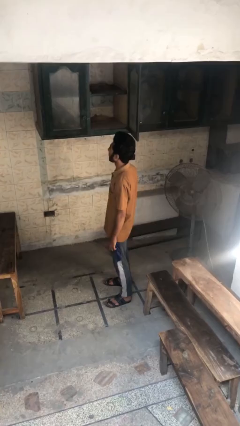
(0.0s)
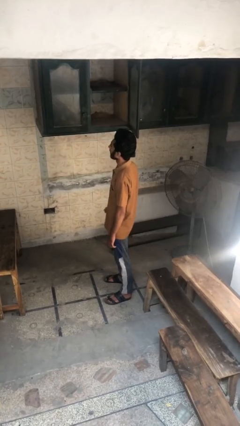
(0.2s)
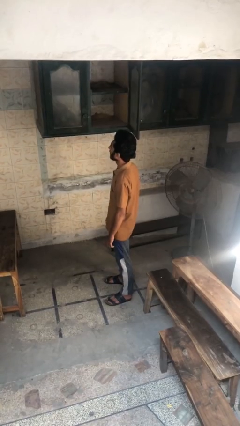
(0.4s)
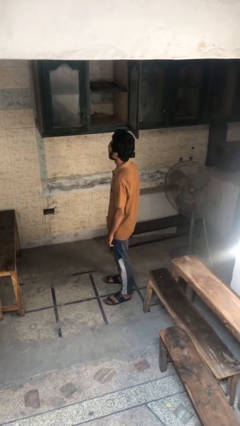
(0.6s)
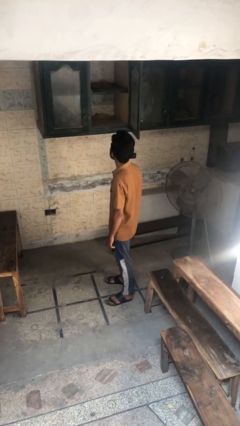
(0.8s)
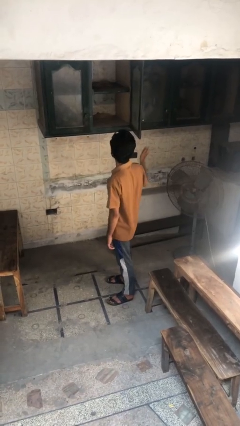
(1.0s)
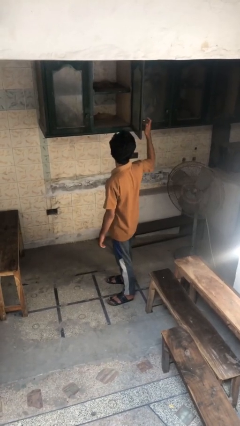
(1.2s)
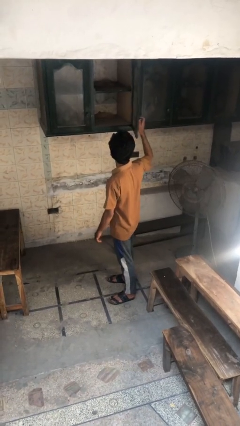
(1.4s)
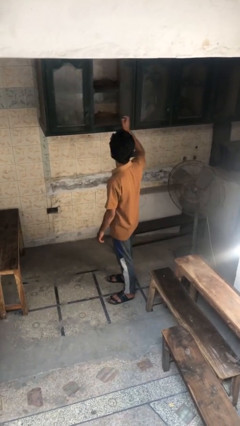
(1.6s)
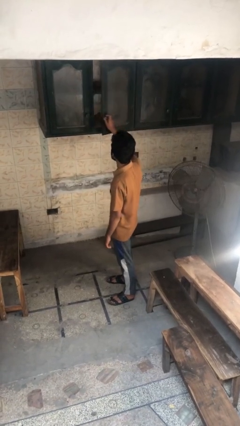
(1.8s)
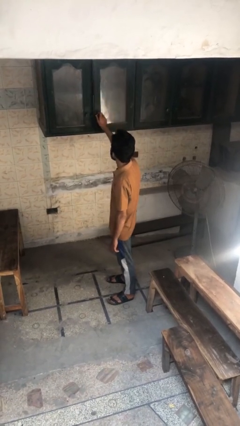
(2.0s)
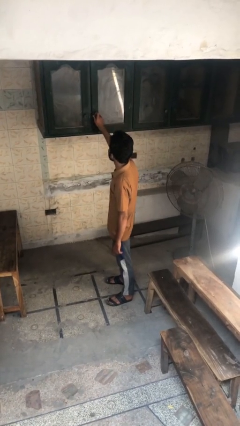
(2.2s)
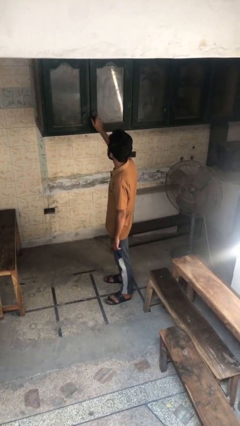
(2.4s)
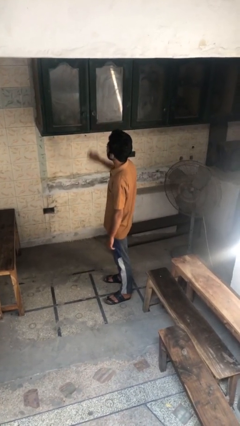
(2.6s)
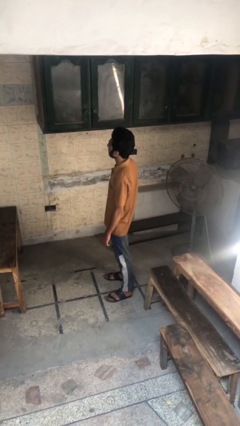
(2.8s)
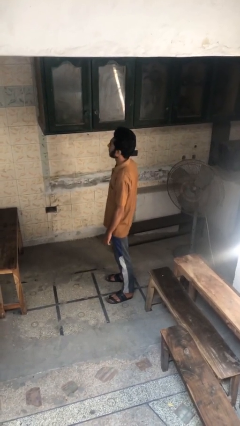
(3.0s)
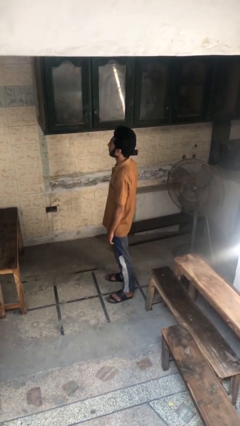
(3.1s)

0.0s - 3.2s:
person closes cabinet

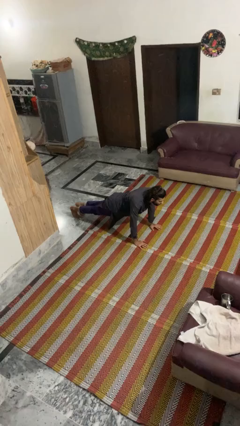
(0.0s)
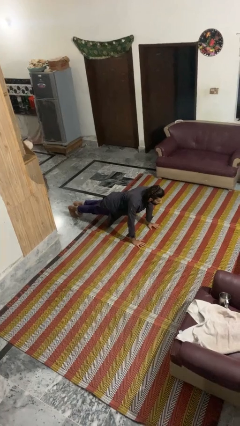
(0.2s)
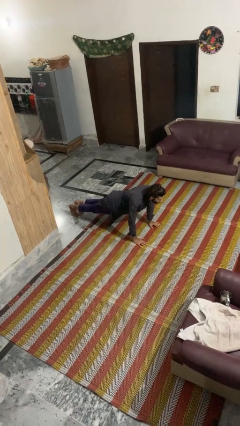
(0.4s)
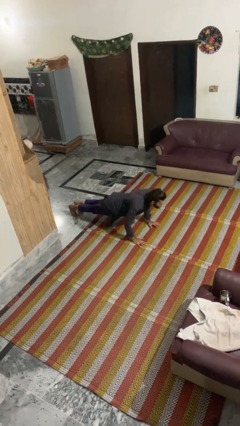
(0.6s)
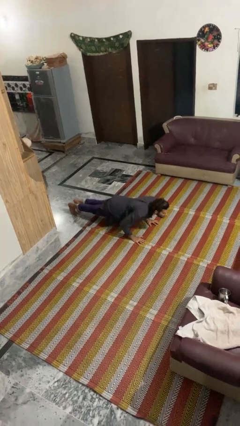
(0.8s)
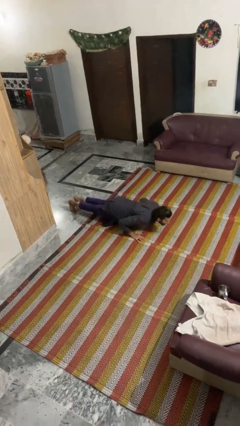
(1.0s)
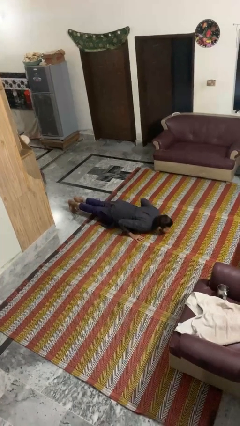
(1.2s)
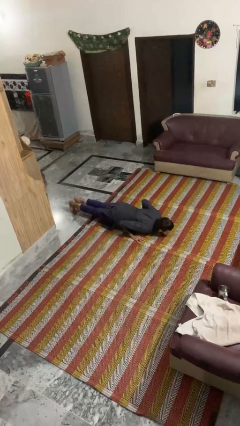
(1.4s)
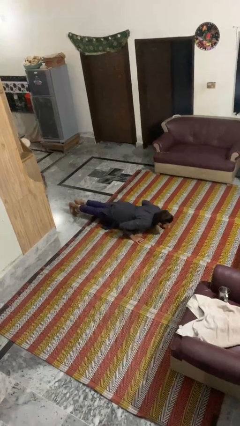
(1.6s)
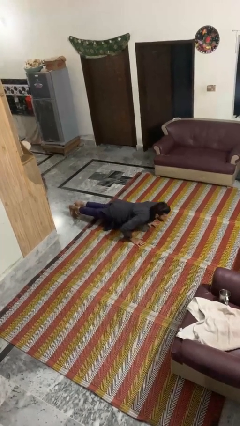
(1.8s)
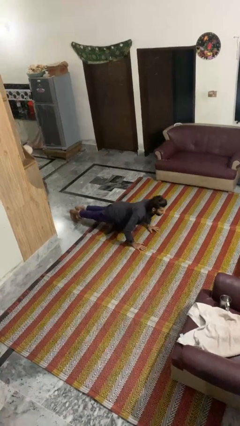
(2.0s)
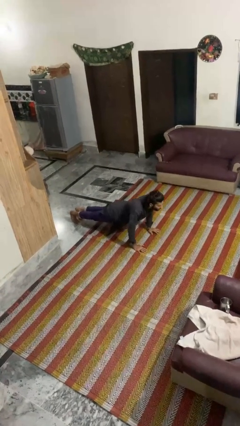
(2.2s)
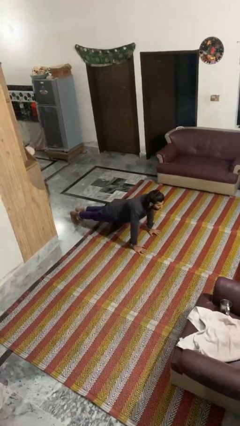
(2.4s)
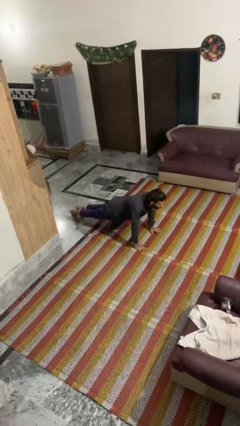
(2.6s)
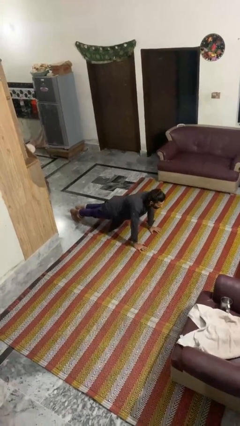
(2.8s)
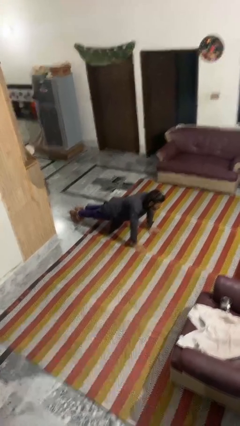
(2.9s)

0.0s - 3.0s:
person exercises with pushup

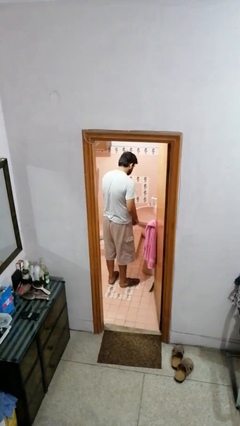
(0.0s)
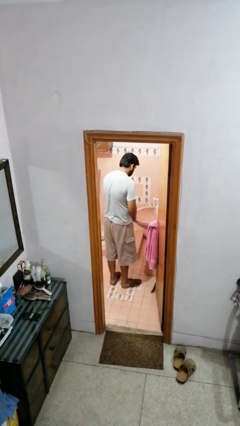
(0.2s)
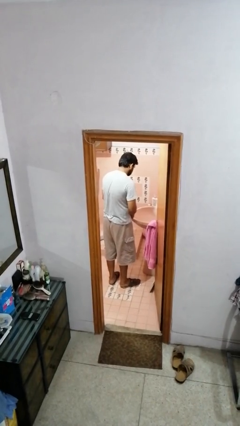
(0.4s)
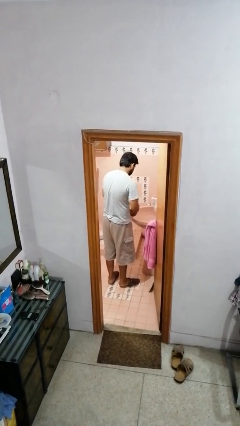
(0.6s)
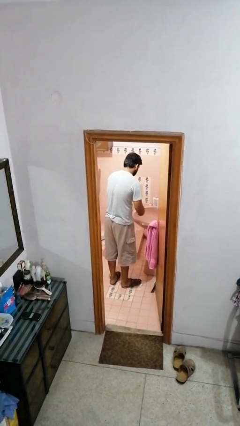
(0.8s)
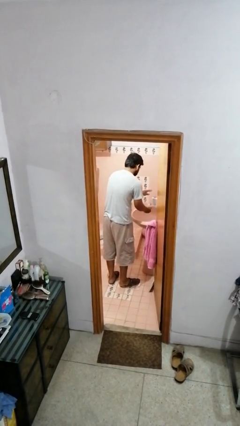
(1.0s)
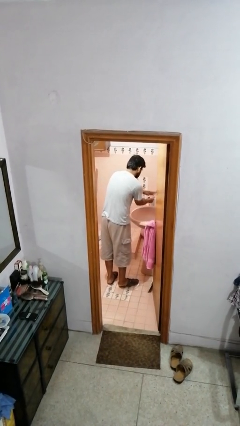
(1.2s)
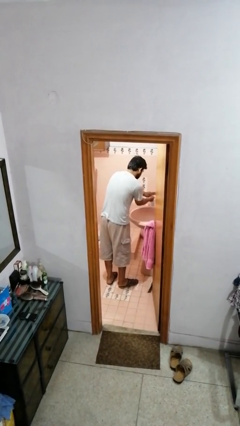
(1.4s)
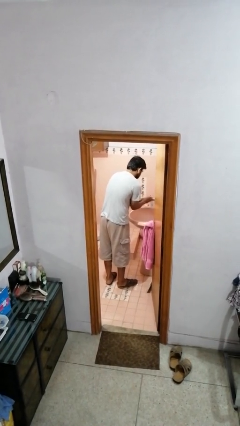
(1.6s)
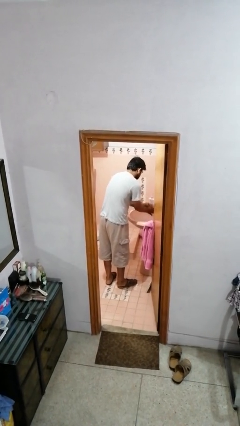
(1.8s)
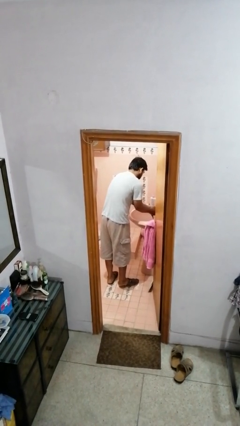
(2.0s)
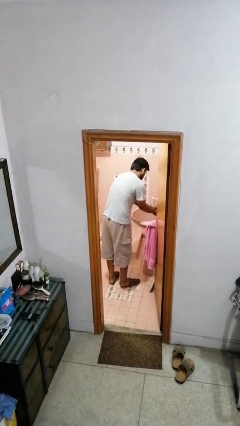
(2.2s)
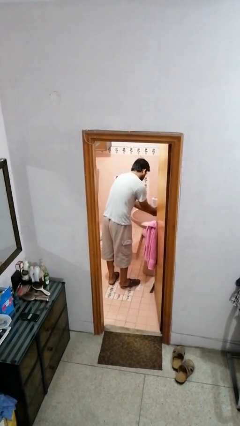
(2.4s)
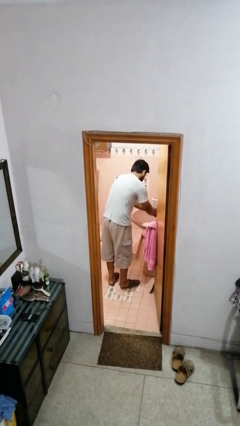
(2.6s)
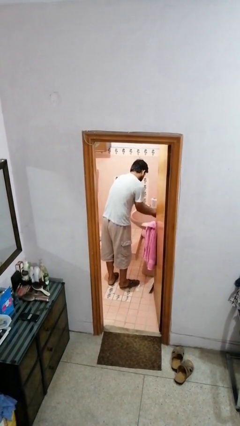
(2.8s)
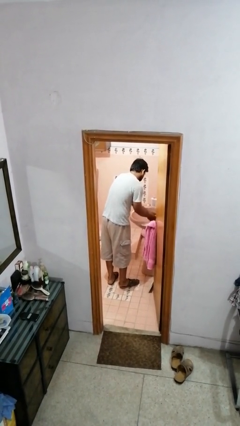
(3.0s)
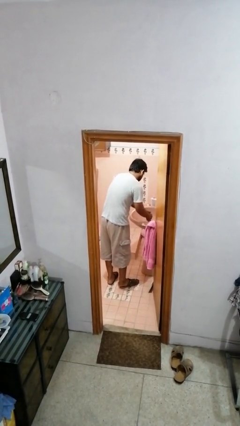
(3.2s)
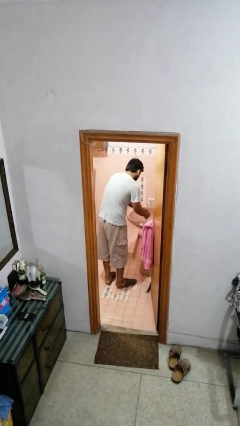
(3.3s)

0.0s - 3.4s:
person washes hands

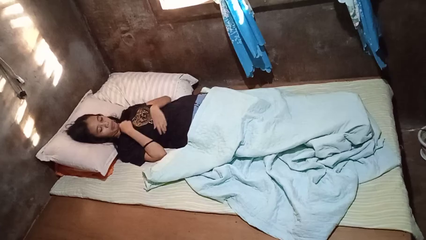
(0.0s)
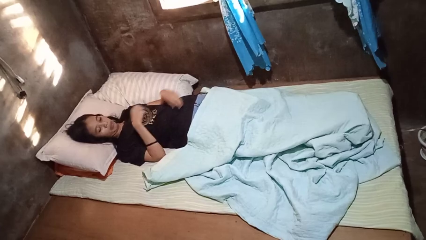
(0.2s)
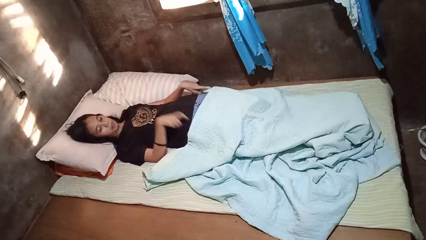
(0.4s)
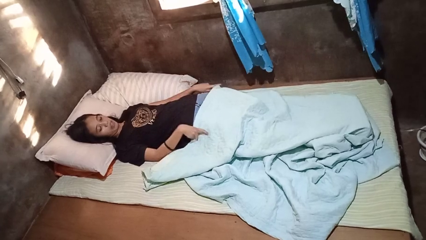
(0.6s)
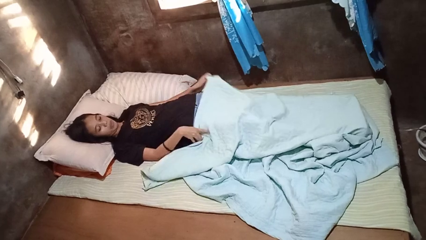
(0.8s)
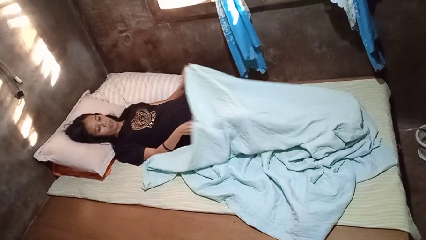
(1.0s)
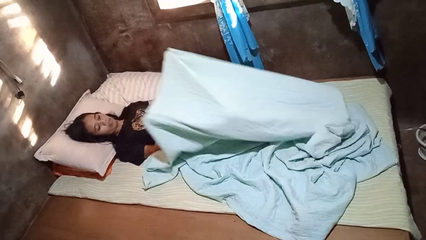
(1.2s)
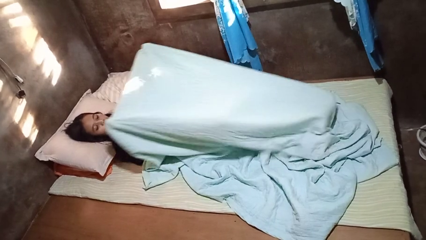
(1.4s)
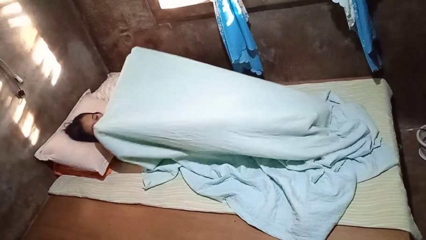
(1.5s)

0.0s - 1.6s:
person covers with bedsheets

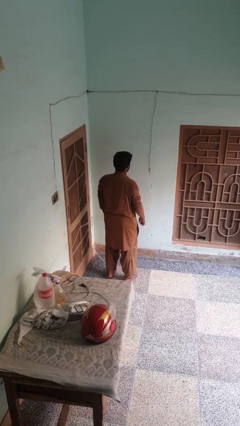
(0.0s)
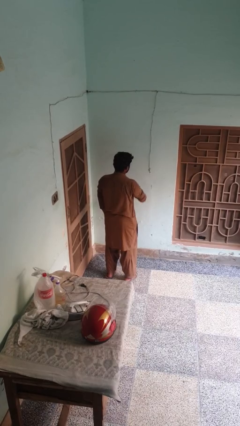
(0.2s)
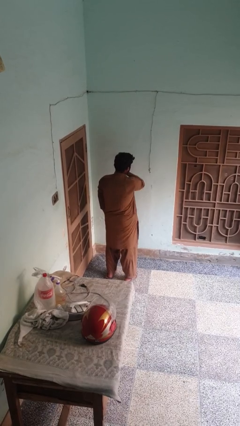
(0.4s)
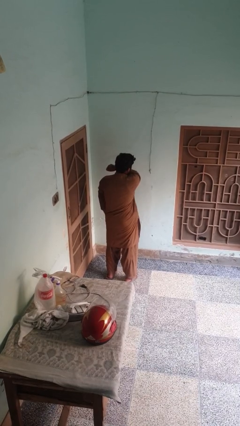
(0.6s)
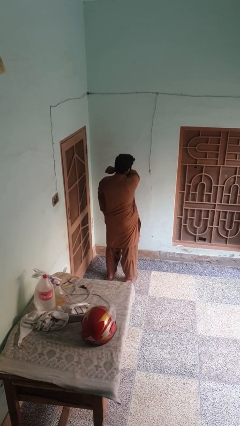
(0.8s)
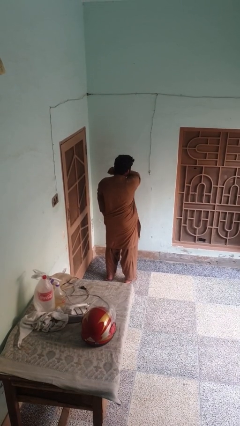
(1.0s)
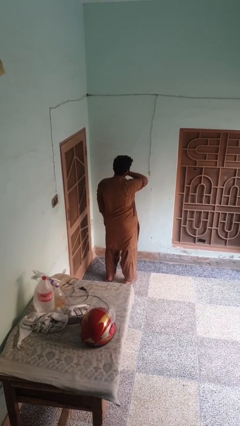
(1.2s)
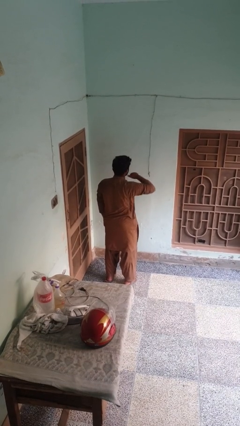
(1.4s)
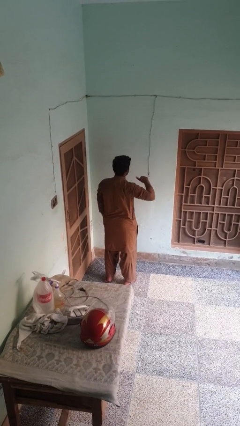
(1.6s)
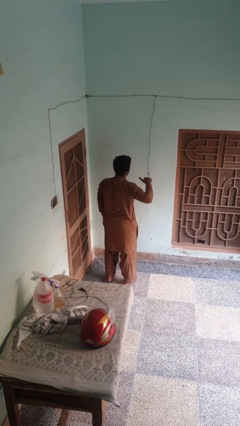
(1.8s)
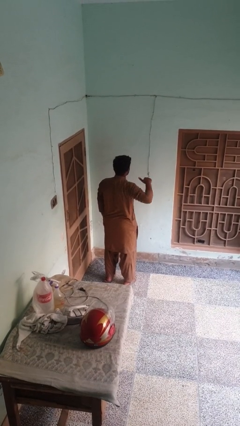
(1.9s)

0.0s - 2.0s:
person gestures cut

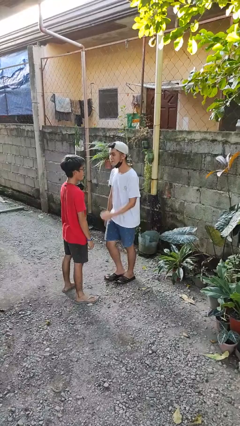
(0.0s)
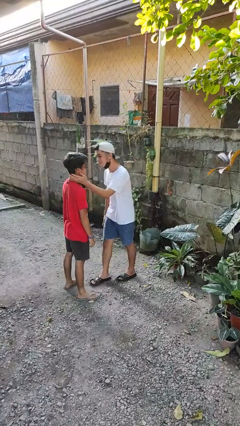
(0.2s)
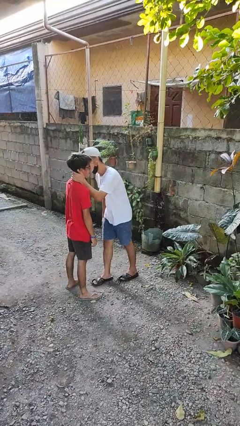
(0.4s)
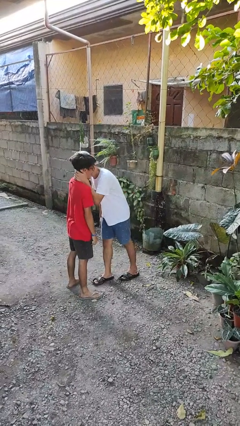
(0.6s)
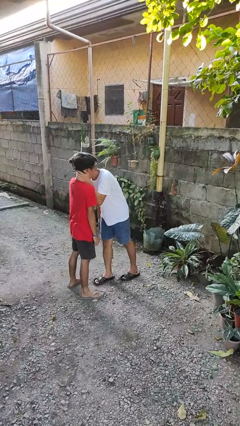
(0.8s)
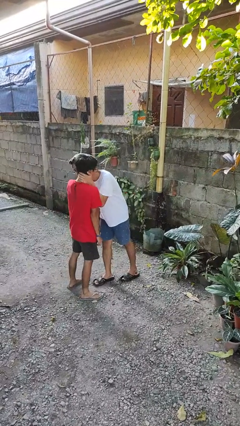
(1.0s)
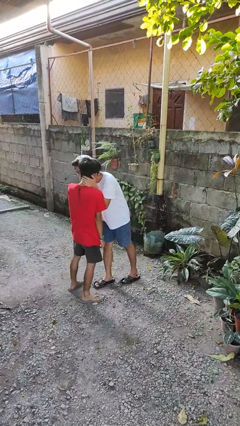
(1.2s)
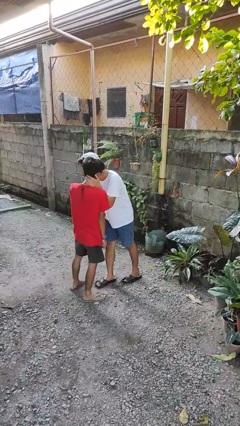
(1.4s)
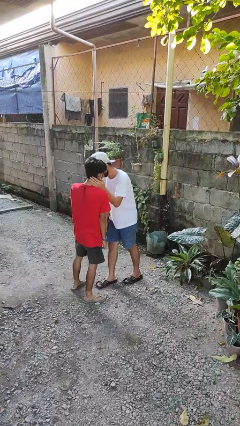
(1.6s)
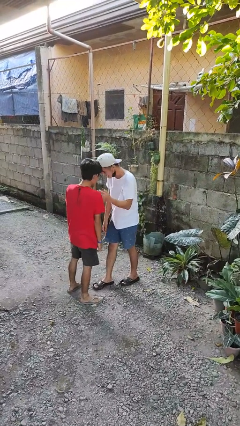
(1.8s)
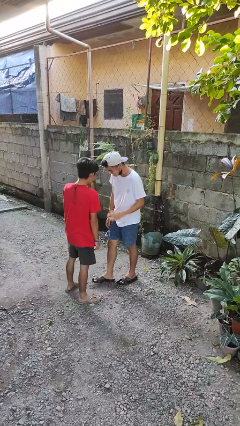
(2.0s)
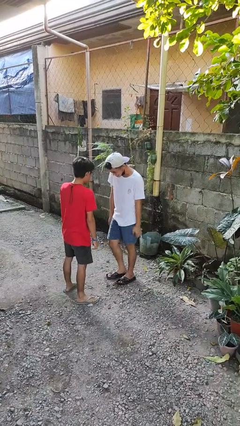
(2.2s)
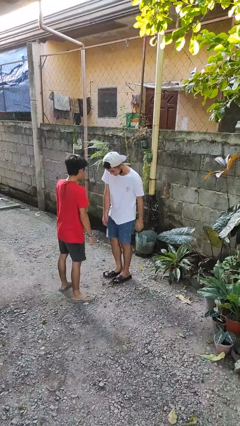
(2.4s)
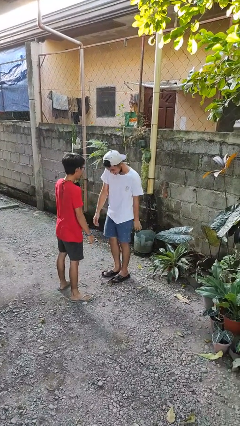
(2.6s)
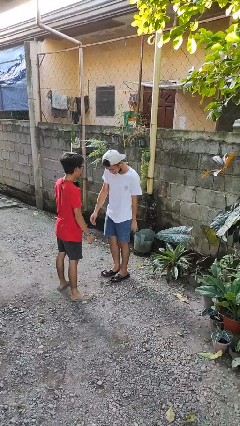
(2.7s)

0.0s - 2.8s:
person kisses cheek of person

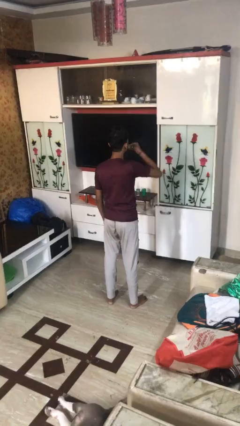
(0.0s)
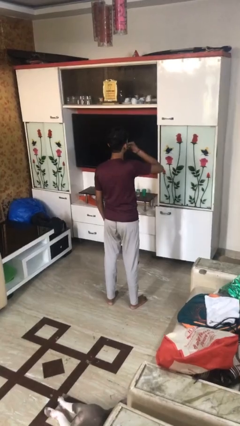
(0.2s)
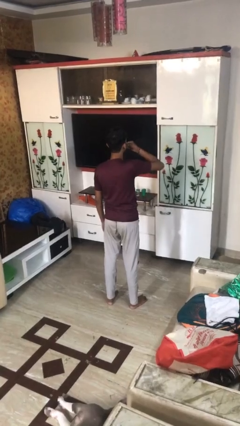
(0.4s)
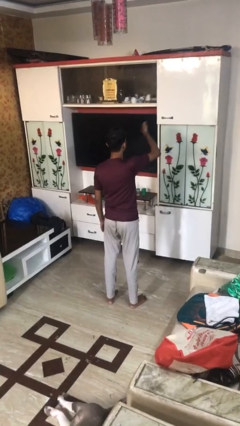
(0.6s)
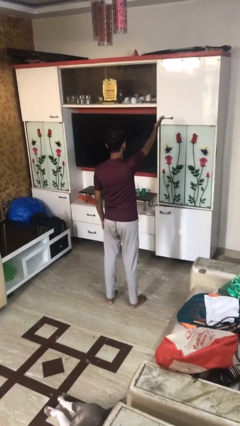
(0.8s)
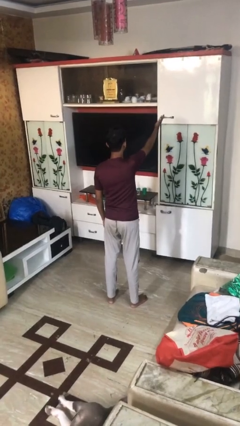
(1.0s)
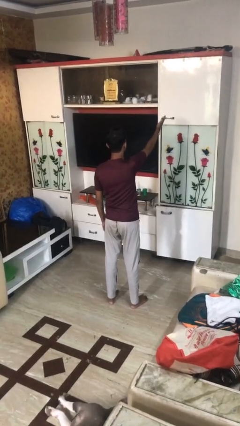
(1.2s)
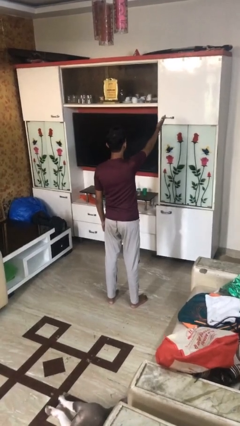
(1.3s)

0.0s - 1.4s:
person gestures blow kiss
